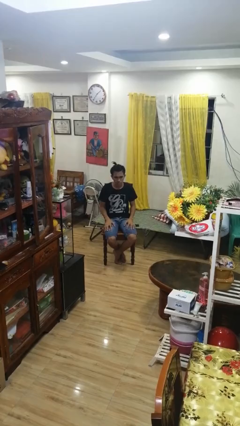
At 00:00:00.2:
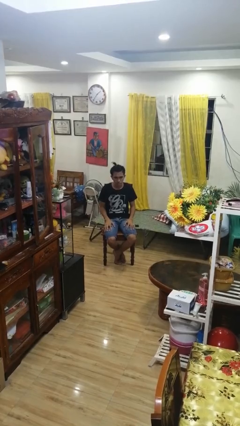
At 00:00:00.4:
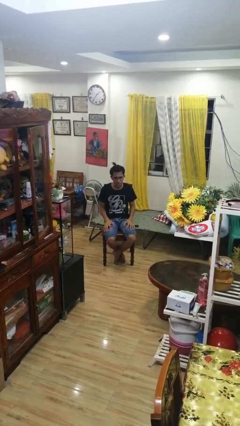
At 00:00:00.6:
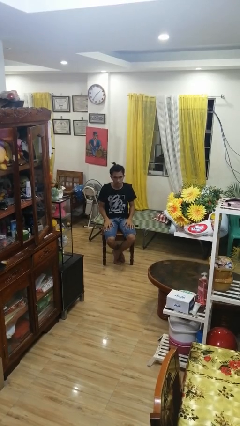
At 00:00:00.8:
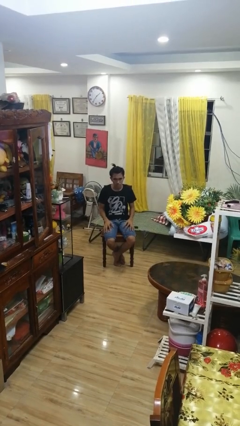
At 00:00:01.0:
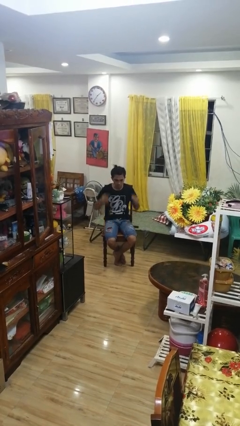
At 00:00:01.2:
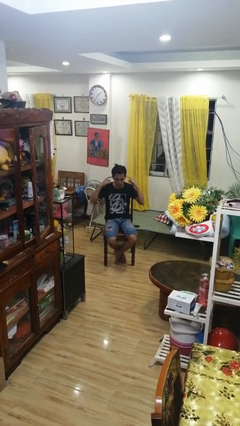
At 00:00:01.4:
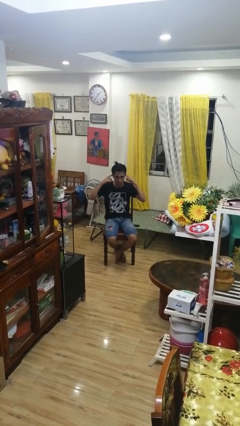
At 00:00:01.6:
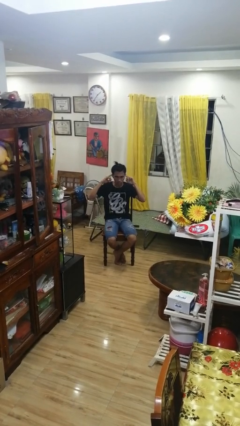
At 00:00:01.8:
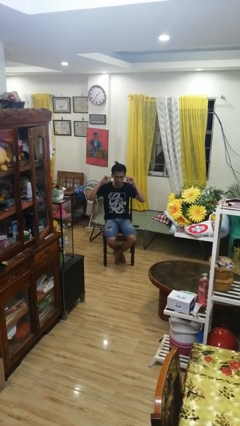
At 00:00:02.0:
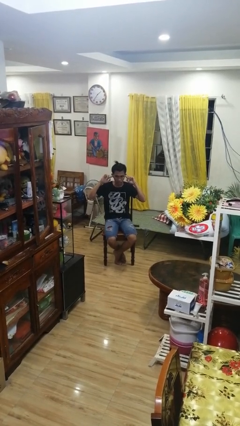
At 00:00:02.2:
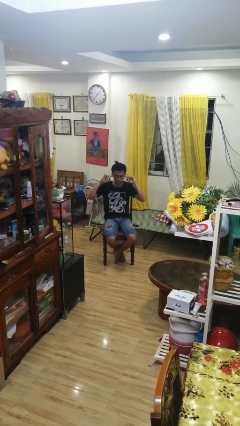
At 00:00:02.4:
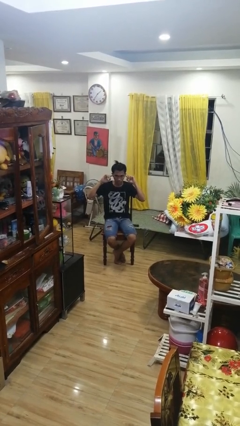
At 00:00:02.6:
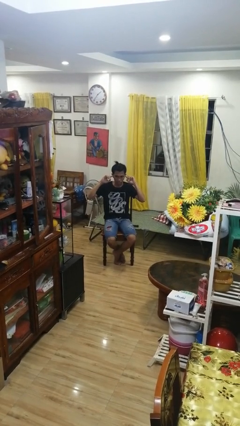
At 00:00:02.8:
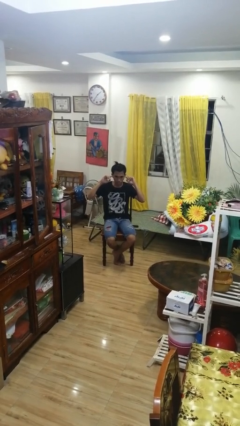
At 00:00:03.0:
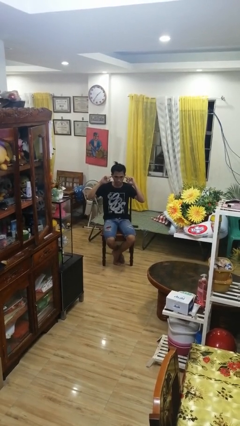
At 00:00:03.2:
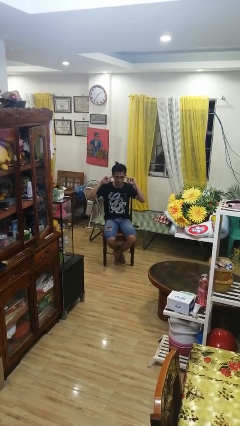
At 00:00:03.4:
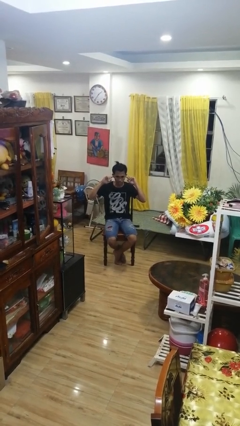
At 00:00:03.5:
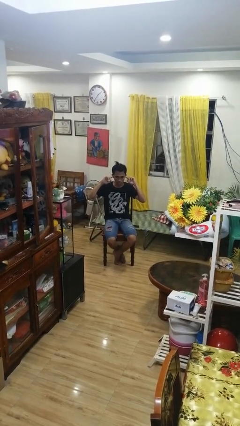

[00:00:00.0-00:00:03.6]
person puts fingers in ear

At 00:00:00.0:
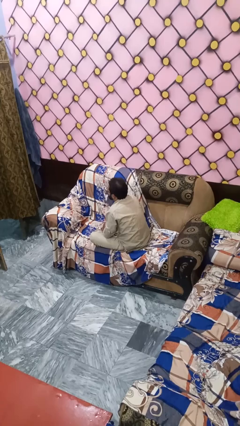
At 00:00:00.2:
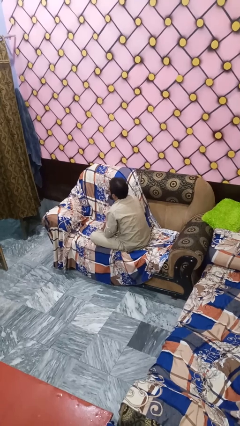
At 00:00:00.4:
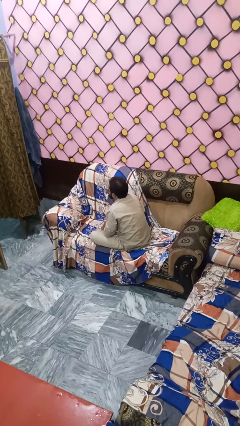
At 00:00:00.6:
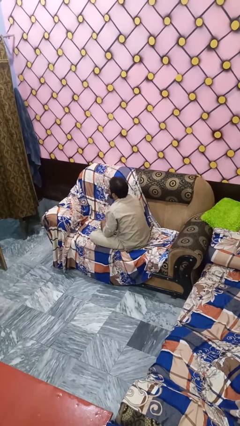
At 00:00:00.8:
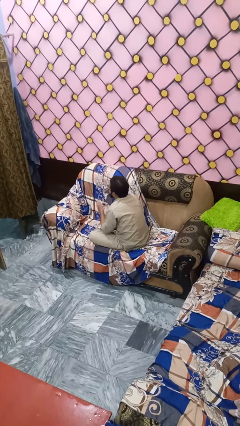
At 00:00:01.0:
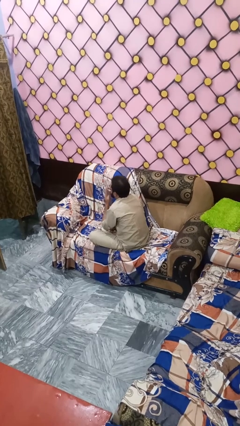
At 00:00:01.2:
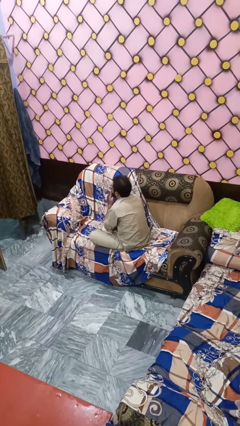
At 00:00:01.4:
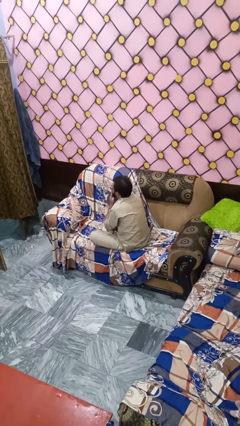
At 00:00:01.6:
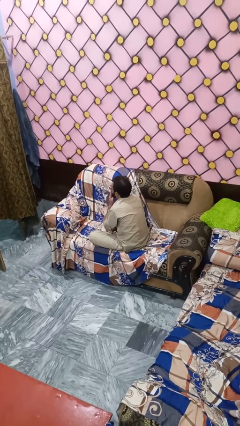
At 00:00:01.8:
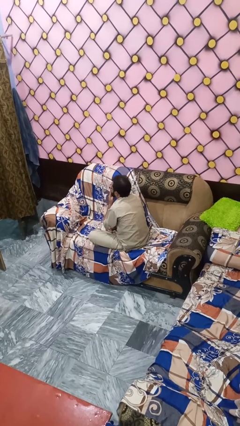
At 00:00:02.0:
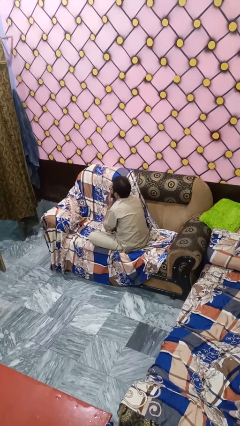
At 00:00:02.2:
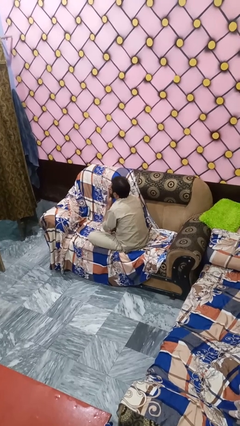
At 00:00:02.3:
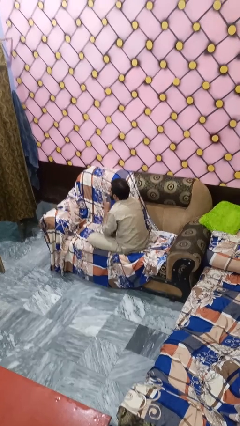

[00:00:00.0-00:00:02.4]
person gestures blow kiss

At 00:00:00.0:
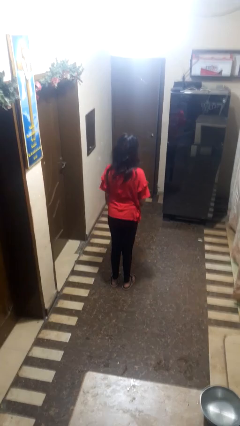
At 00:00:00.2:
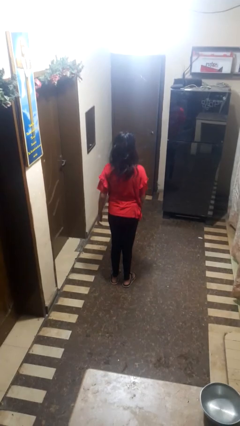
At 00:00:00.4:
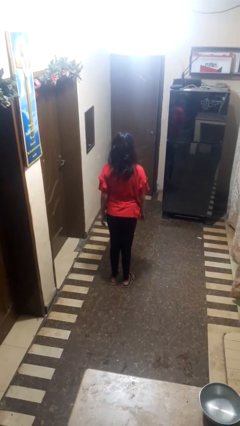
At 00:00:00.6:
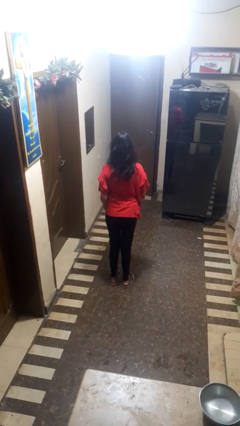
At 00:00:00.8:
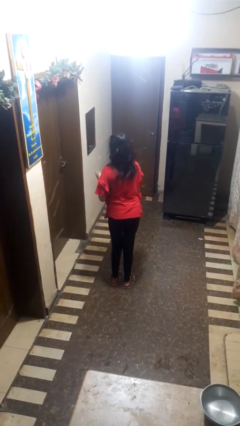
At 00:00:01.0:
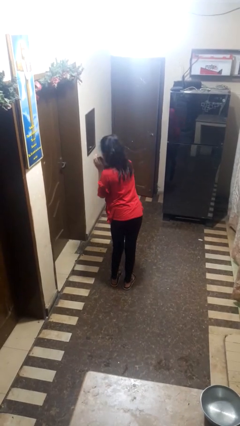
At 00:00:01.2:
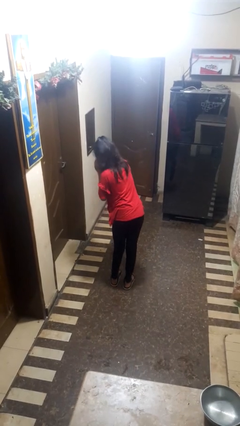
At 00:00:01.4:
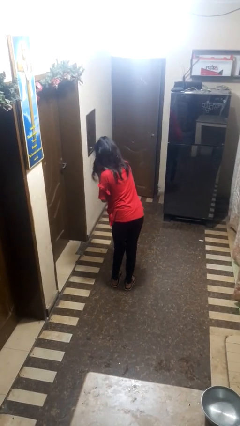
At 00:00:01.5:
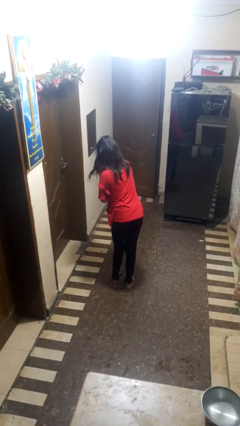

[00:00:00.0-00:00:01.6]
person sneezes into hand

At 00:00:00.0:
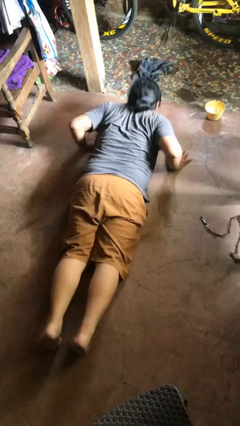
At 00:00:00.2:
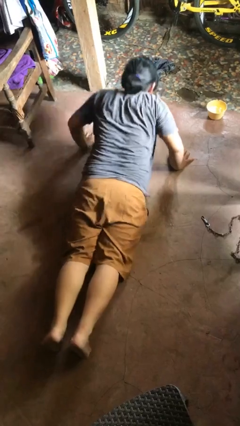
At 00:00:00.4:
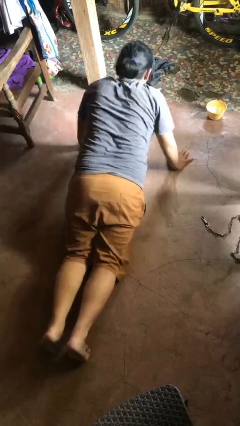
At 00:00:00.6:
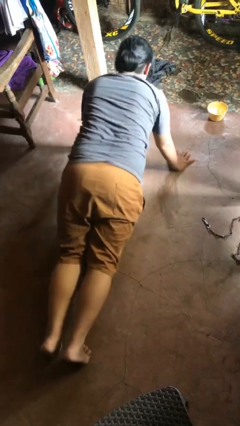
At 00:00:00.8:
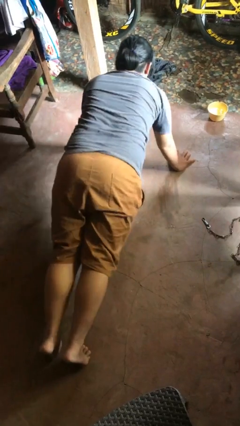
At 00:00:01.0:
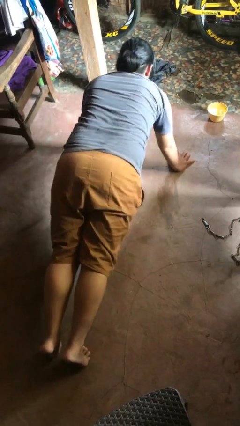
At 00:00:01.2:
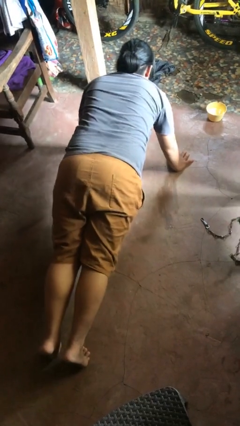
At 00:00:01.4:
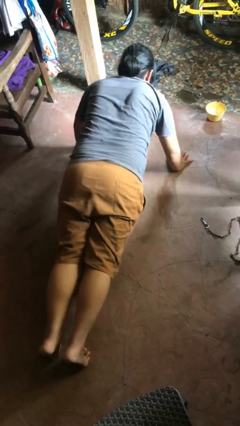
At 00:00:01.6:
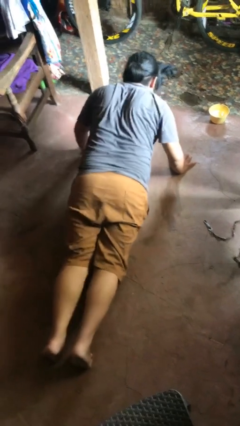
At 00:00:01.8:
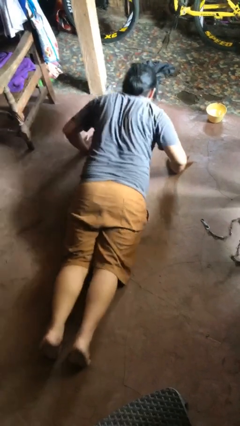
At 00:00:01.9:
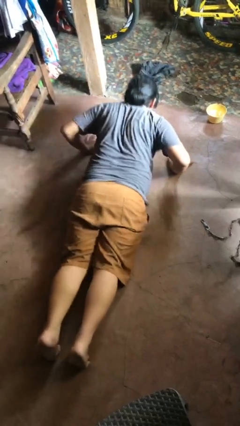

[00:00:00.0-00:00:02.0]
person exercises with pushup

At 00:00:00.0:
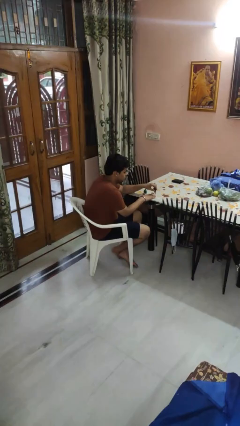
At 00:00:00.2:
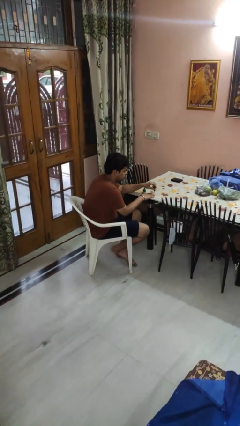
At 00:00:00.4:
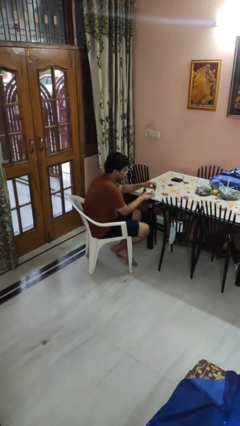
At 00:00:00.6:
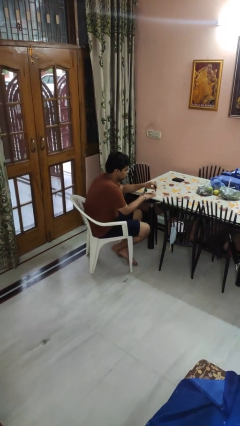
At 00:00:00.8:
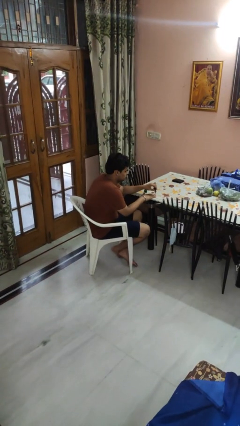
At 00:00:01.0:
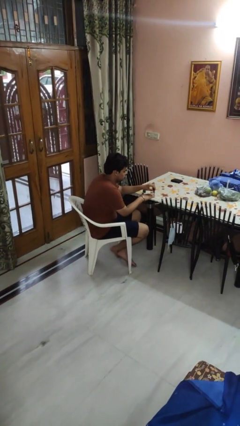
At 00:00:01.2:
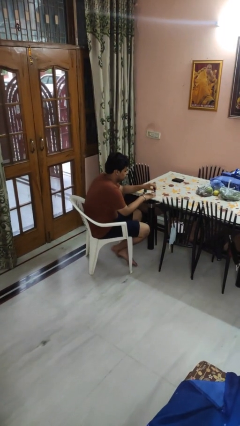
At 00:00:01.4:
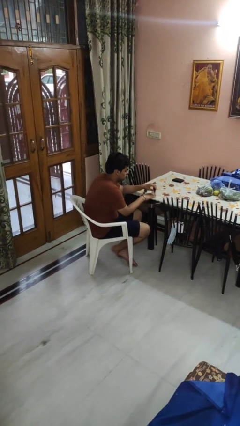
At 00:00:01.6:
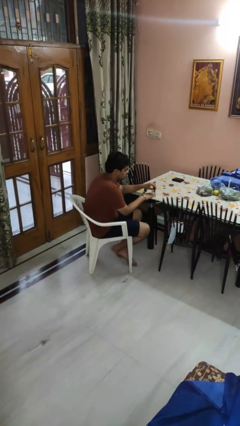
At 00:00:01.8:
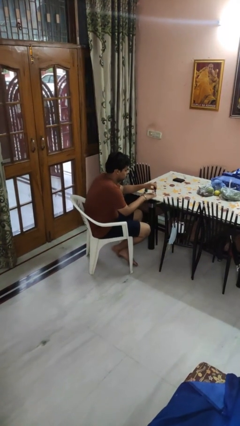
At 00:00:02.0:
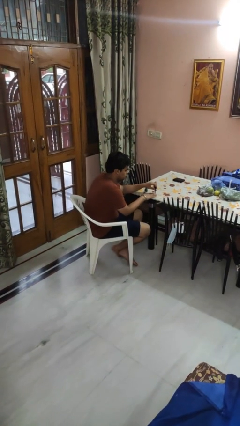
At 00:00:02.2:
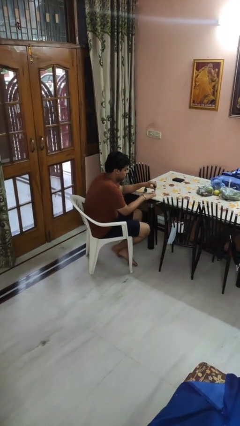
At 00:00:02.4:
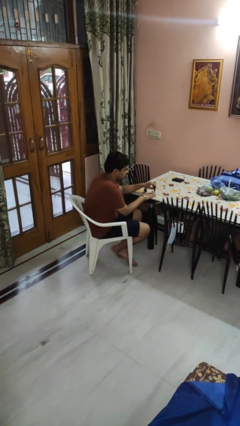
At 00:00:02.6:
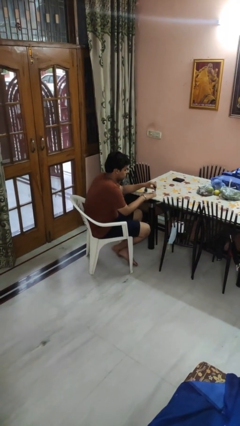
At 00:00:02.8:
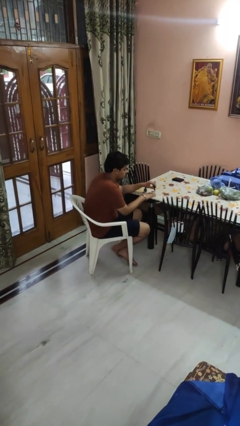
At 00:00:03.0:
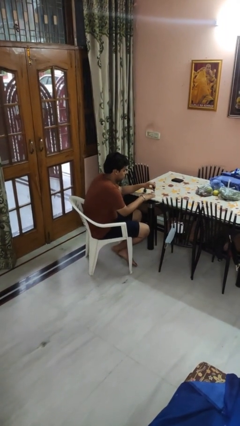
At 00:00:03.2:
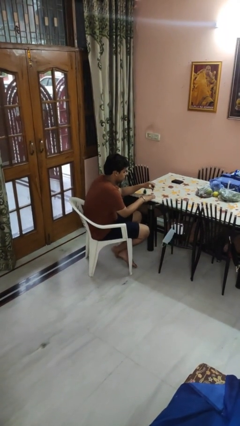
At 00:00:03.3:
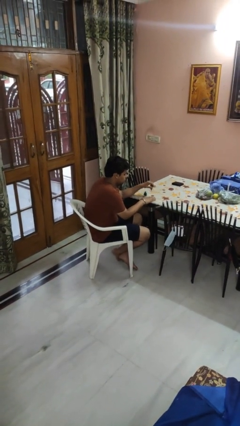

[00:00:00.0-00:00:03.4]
person paints fingernails

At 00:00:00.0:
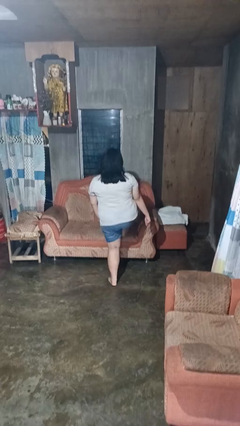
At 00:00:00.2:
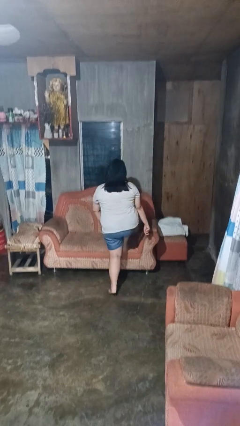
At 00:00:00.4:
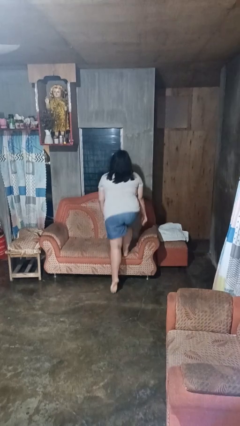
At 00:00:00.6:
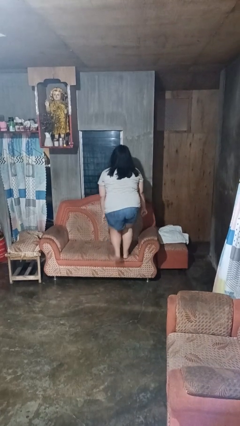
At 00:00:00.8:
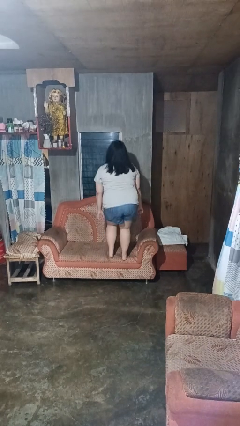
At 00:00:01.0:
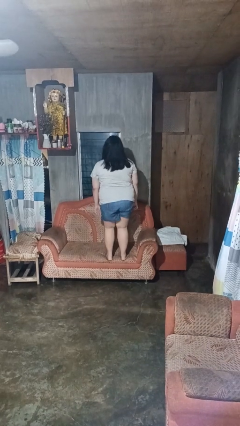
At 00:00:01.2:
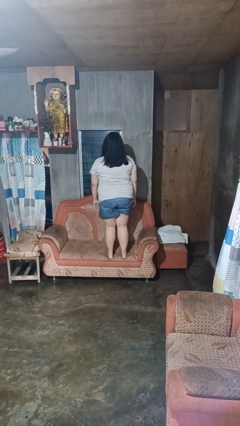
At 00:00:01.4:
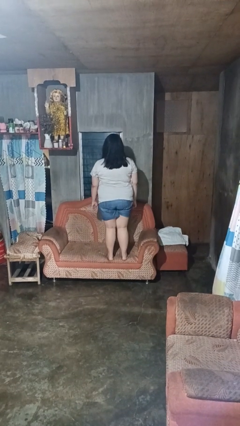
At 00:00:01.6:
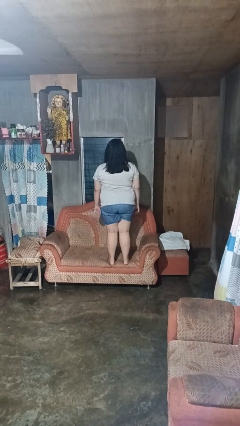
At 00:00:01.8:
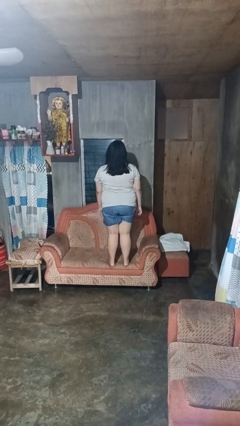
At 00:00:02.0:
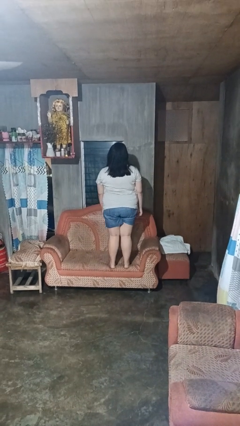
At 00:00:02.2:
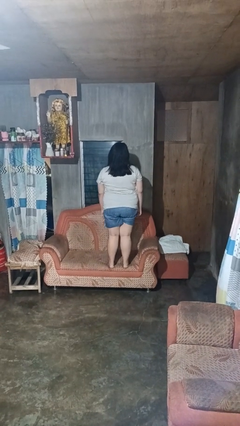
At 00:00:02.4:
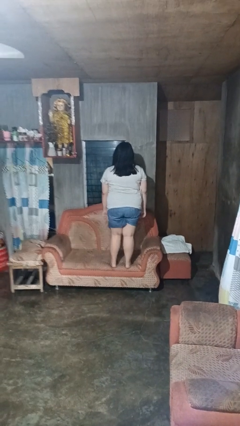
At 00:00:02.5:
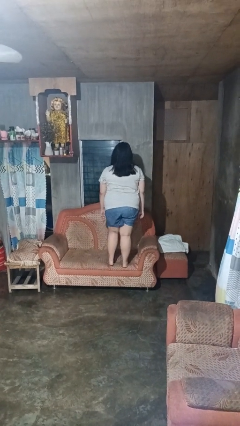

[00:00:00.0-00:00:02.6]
person climbs on couch

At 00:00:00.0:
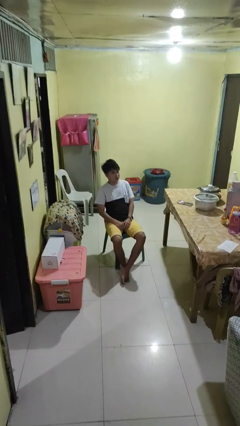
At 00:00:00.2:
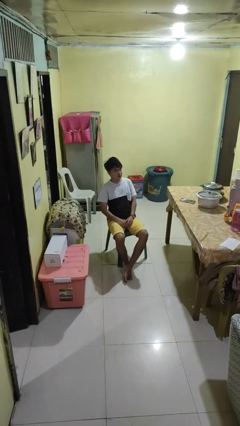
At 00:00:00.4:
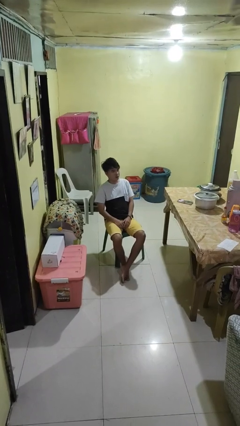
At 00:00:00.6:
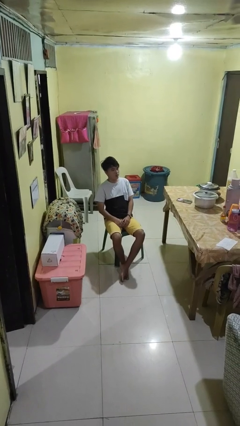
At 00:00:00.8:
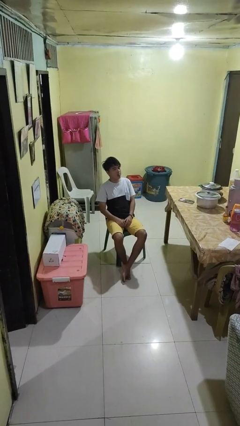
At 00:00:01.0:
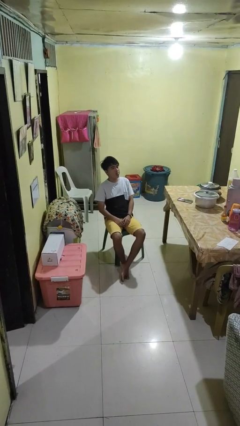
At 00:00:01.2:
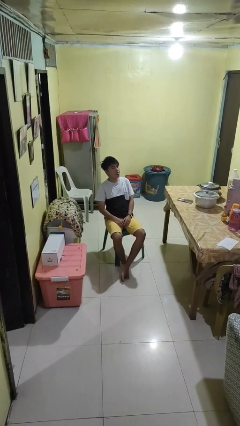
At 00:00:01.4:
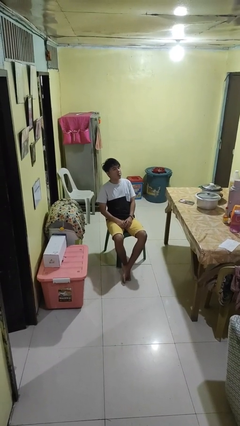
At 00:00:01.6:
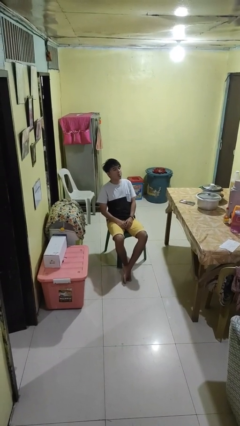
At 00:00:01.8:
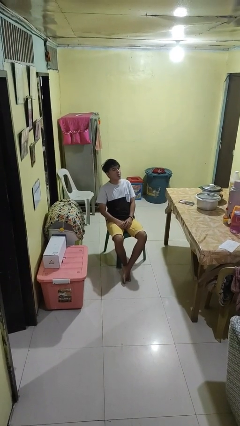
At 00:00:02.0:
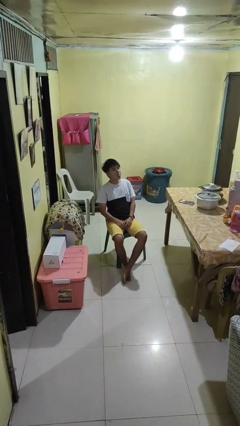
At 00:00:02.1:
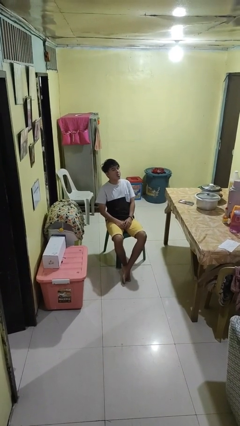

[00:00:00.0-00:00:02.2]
person sticks out tongue
